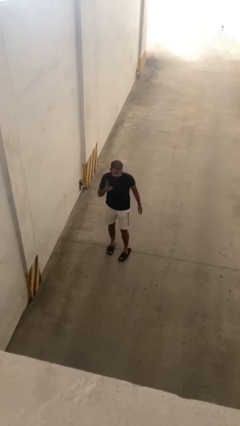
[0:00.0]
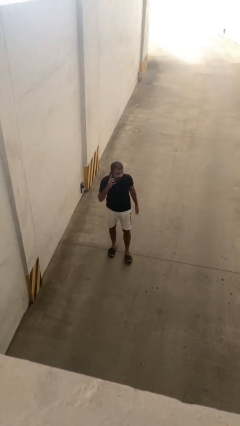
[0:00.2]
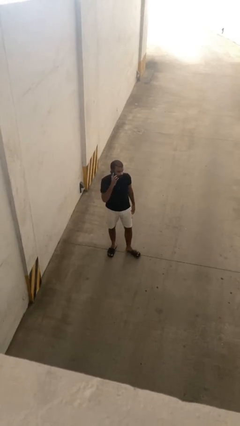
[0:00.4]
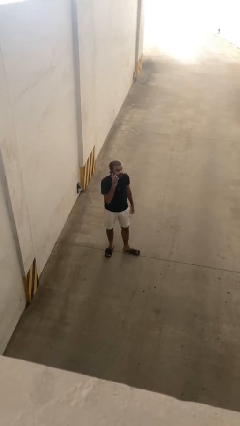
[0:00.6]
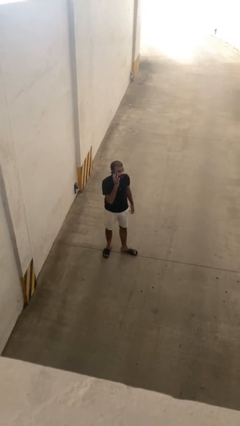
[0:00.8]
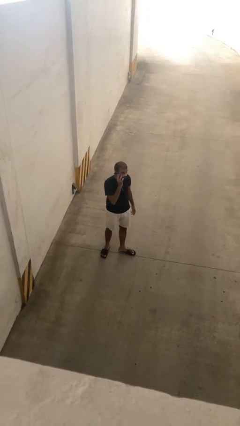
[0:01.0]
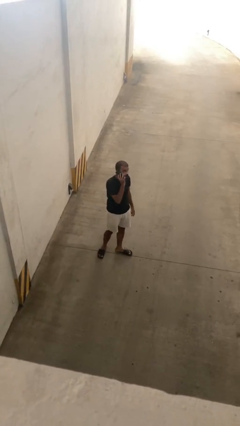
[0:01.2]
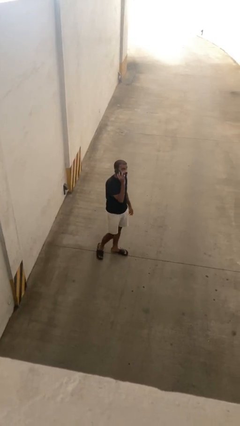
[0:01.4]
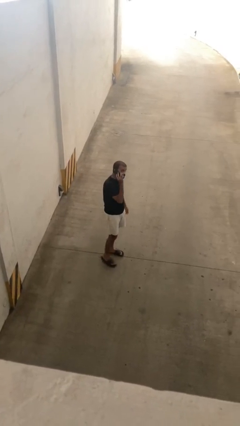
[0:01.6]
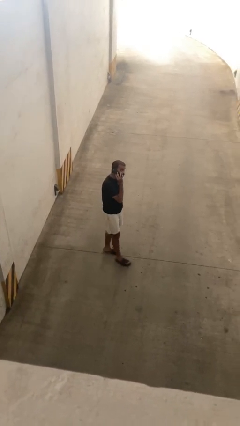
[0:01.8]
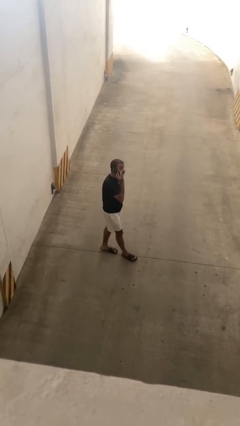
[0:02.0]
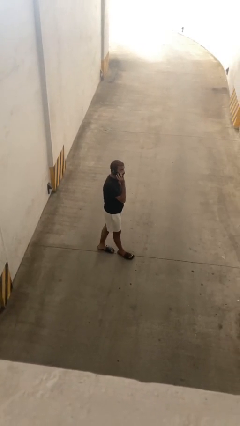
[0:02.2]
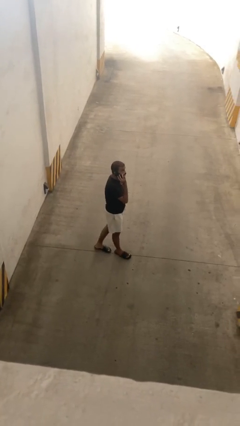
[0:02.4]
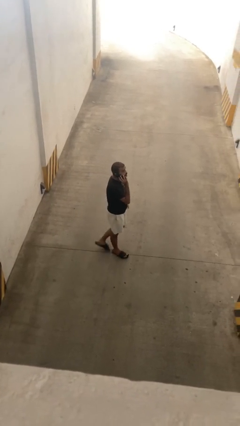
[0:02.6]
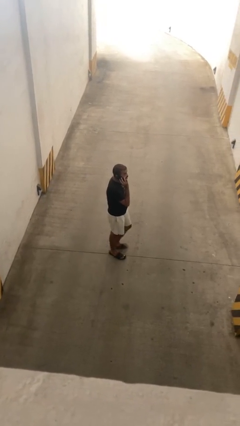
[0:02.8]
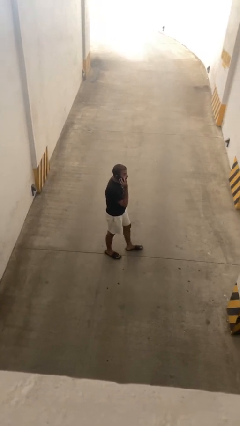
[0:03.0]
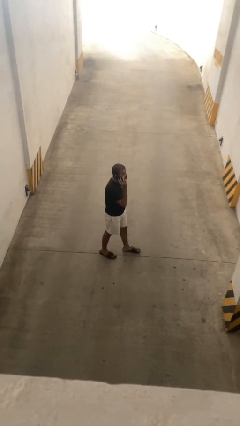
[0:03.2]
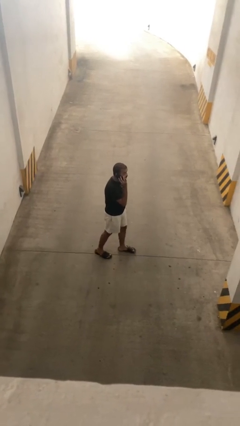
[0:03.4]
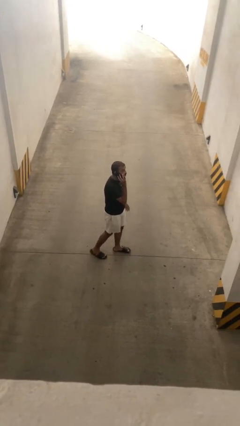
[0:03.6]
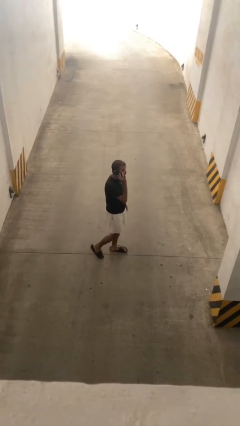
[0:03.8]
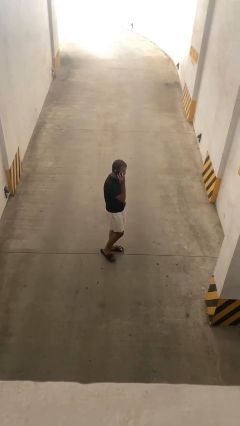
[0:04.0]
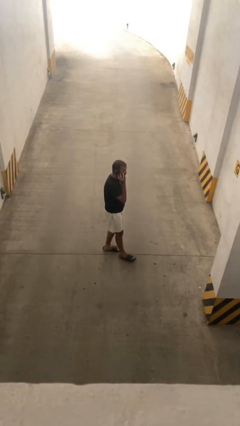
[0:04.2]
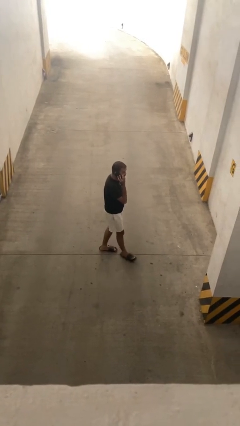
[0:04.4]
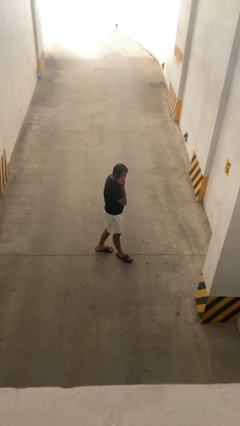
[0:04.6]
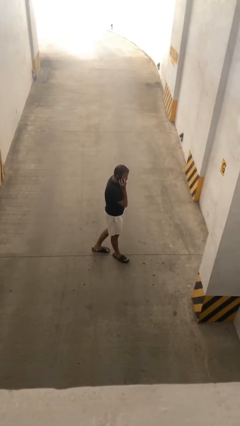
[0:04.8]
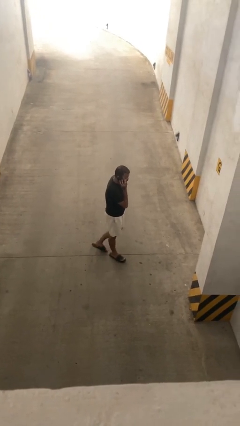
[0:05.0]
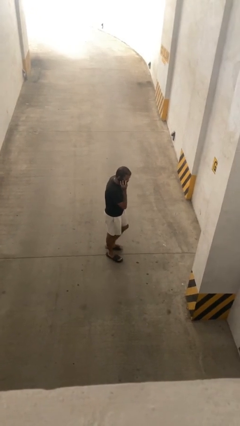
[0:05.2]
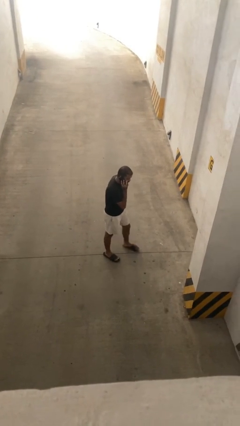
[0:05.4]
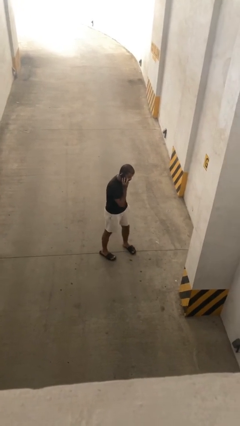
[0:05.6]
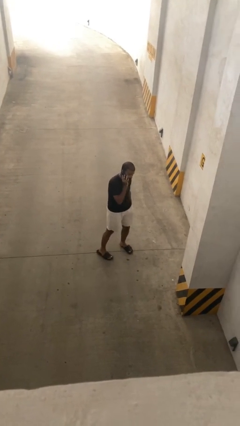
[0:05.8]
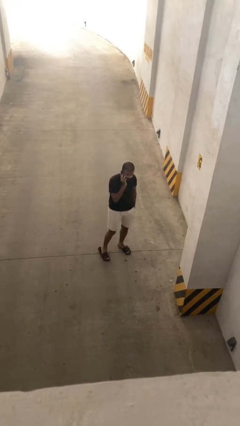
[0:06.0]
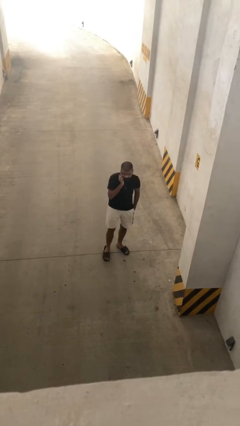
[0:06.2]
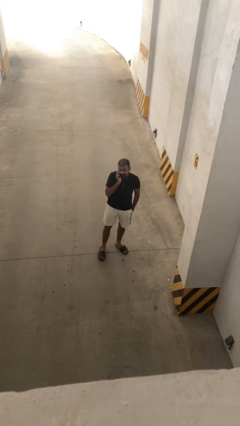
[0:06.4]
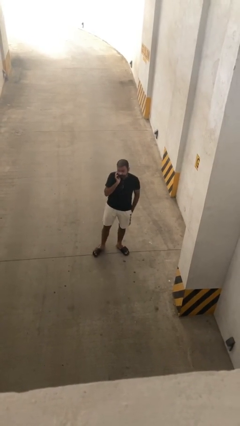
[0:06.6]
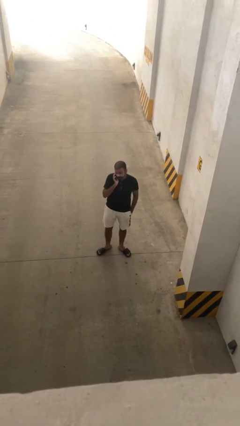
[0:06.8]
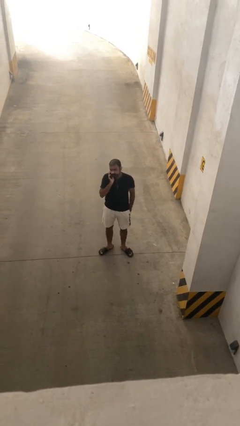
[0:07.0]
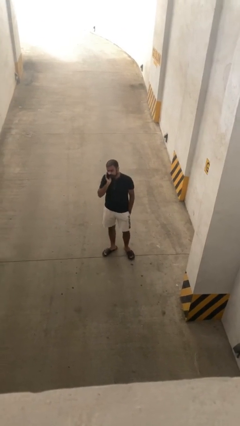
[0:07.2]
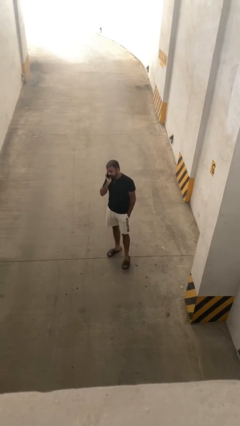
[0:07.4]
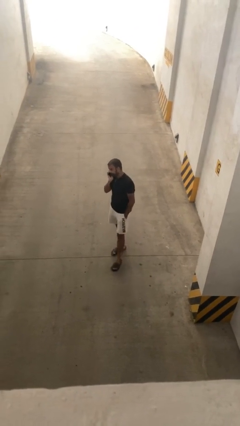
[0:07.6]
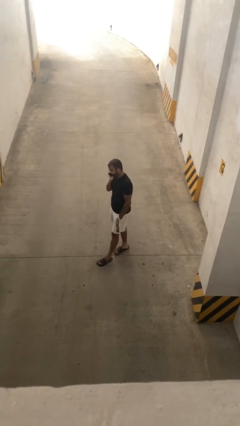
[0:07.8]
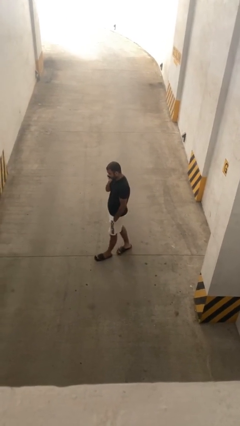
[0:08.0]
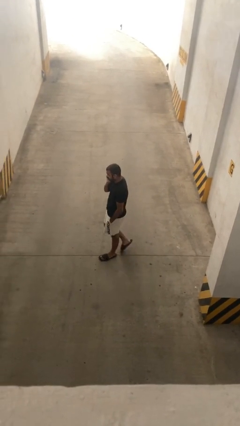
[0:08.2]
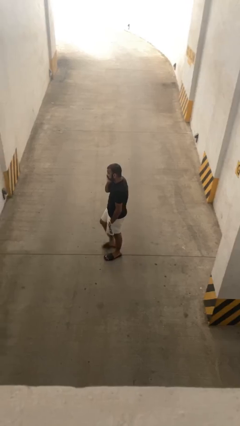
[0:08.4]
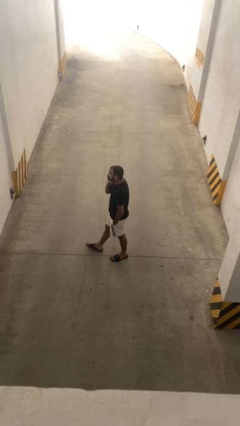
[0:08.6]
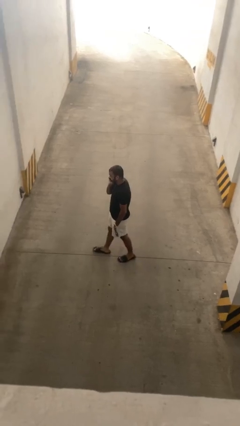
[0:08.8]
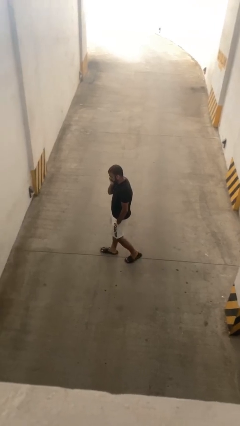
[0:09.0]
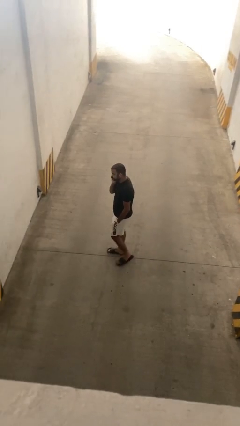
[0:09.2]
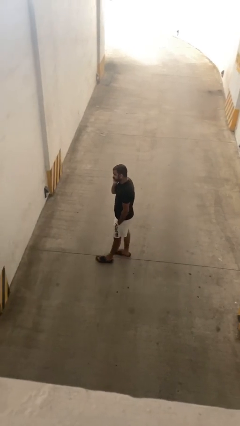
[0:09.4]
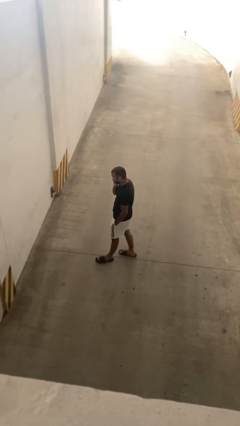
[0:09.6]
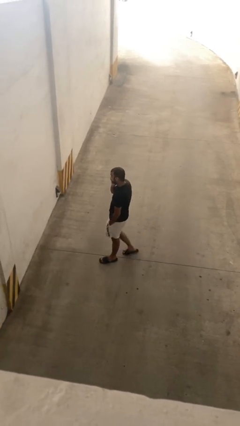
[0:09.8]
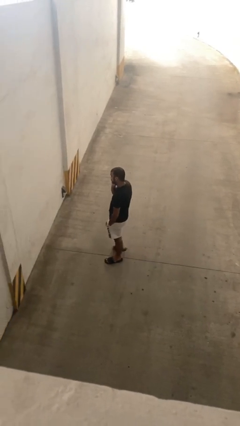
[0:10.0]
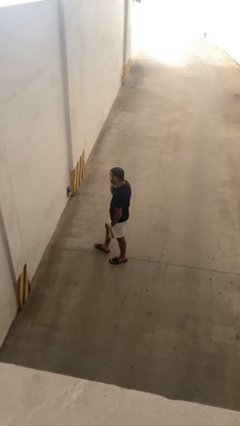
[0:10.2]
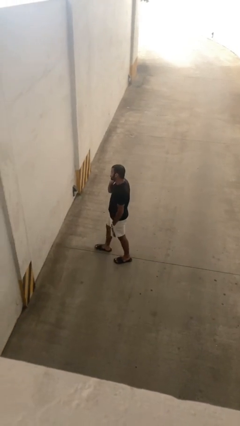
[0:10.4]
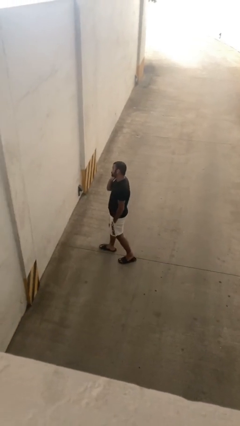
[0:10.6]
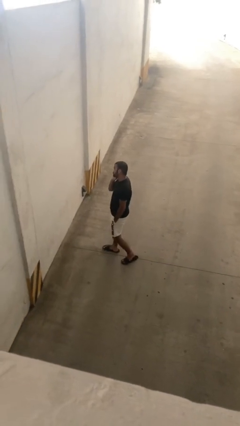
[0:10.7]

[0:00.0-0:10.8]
person talks on phone

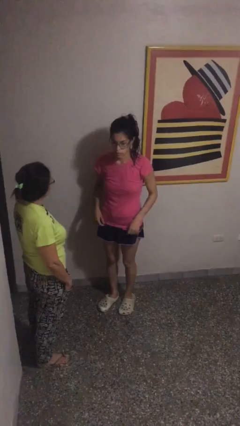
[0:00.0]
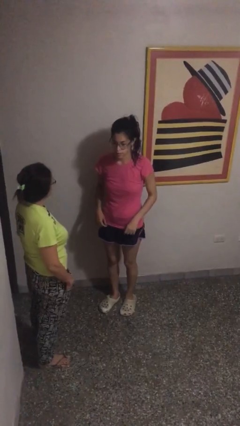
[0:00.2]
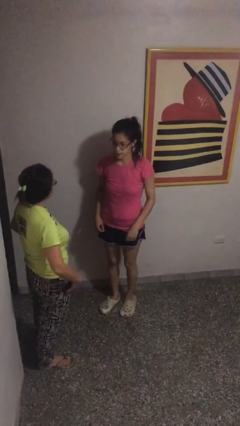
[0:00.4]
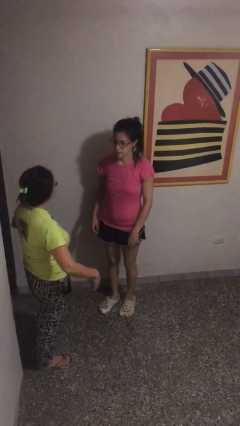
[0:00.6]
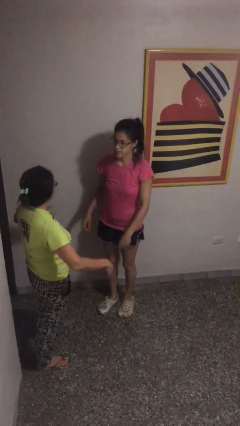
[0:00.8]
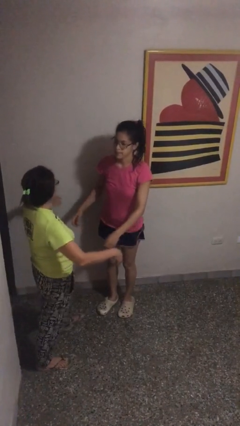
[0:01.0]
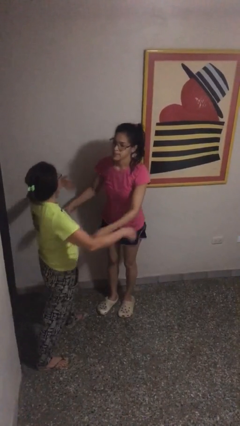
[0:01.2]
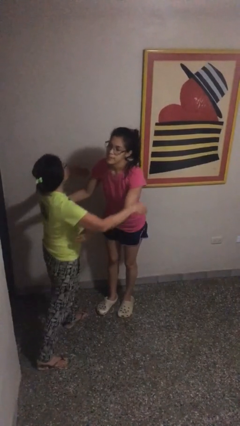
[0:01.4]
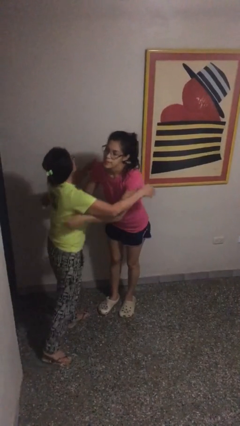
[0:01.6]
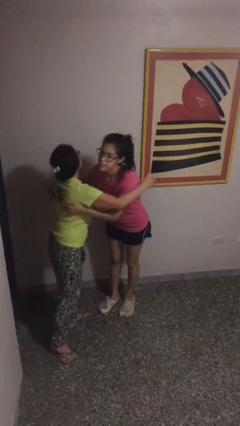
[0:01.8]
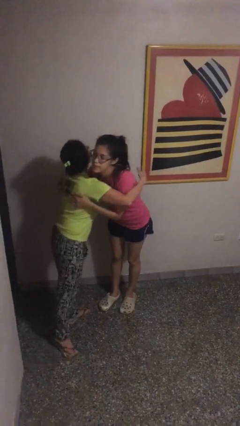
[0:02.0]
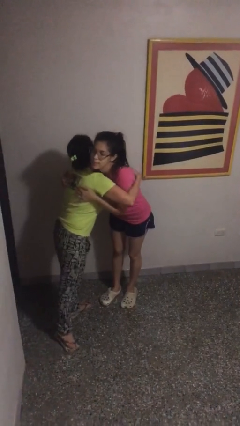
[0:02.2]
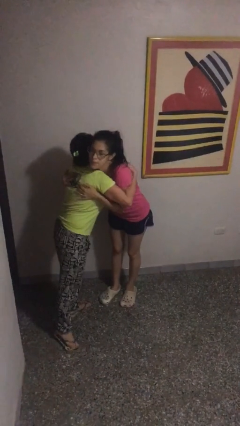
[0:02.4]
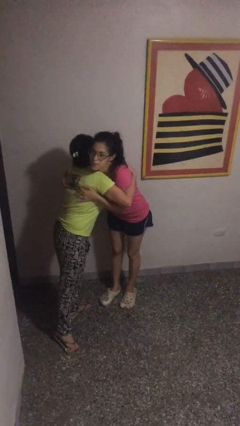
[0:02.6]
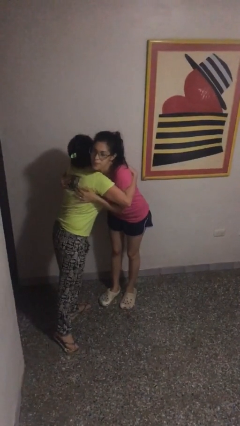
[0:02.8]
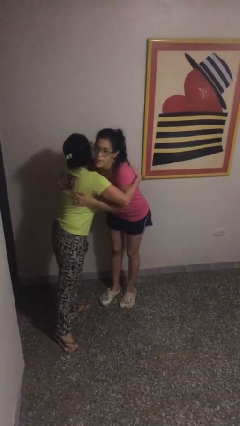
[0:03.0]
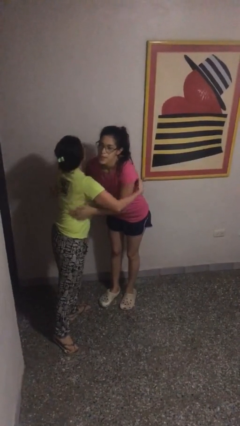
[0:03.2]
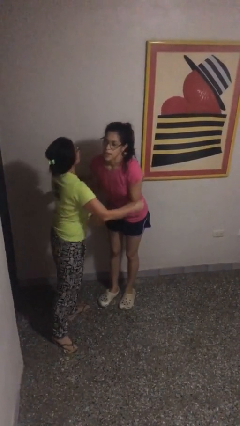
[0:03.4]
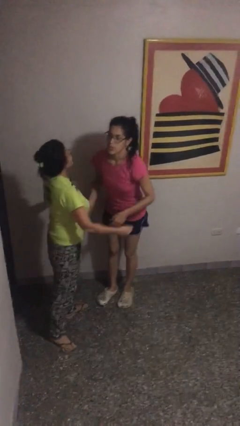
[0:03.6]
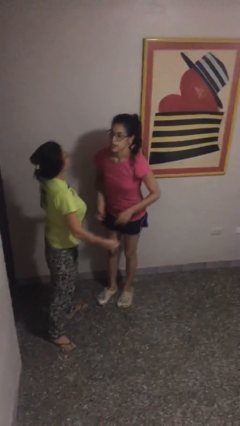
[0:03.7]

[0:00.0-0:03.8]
person embraces person

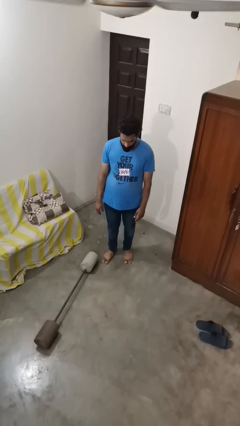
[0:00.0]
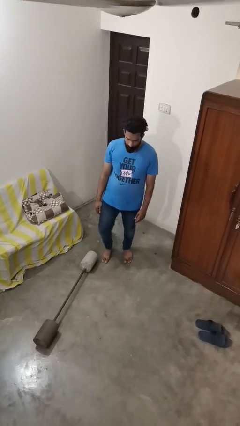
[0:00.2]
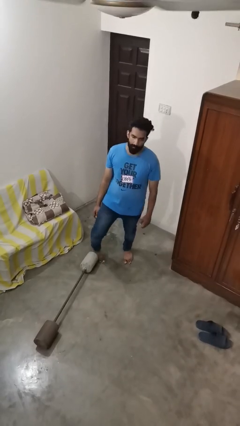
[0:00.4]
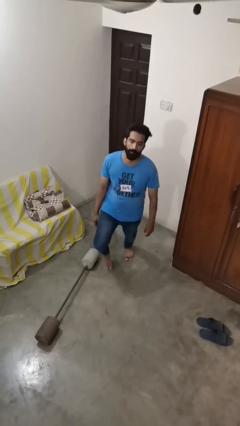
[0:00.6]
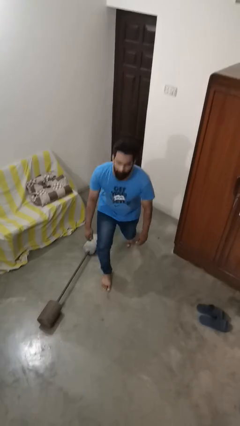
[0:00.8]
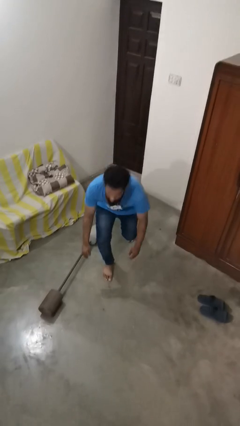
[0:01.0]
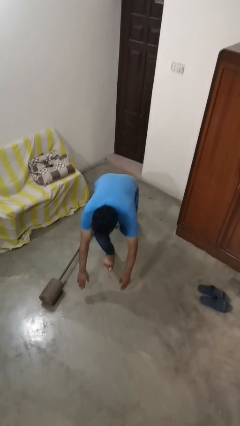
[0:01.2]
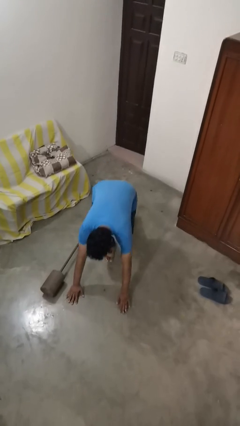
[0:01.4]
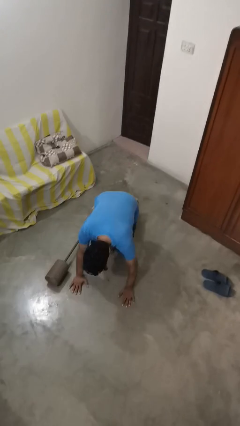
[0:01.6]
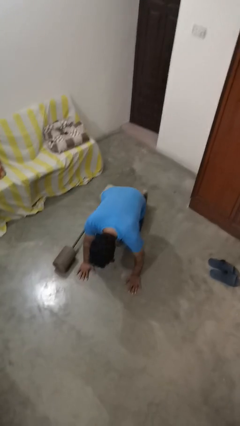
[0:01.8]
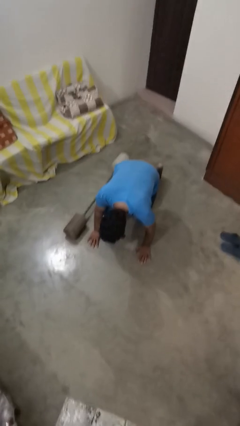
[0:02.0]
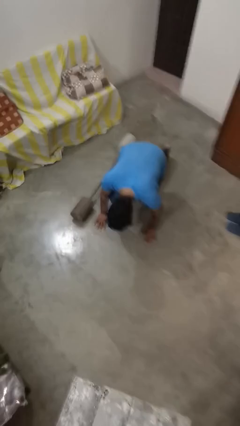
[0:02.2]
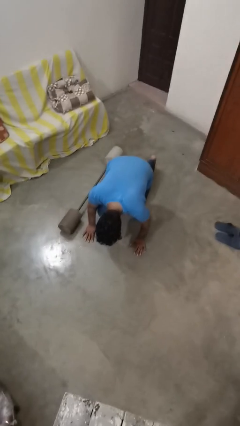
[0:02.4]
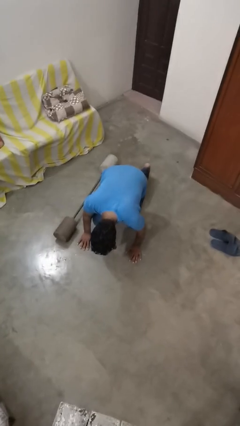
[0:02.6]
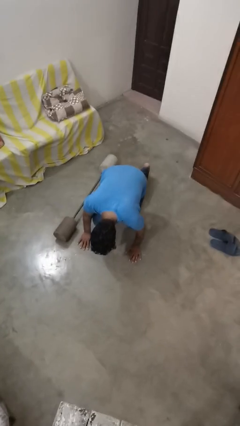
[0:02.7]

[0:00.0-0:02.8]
person trips on object on floor

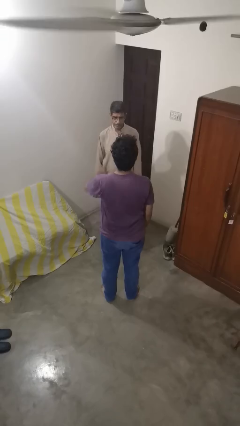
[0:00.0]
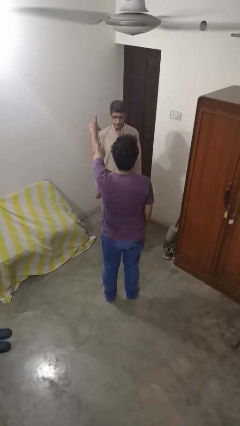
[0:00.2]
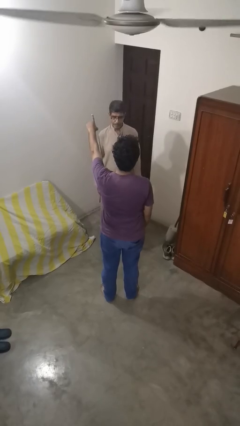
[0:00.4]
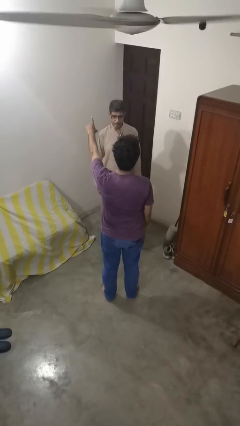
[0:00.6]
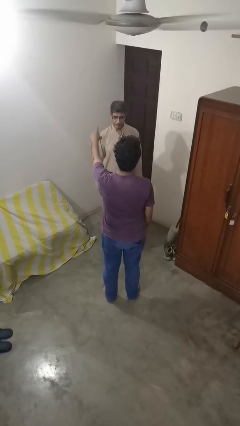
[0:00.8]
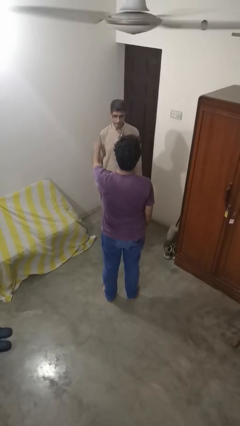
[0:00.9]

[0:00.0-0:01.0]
person shoves person
